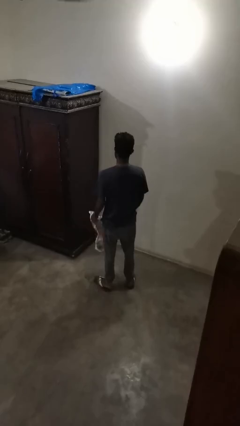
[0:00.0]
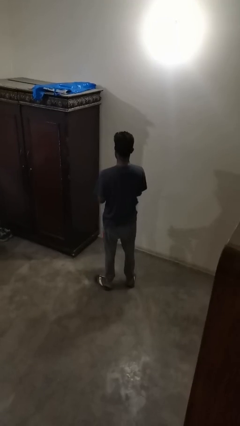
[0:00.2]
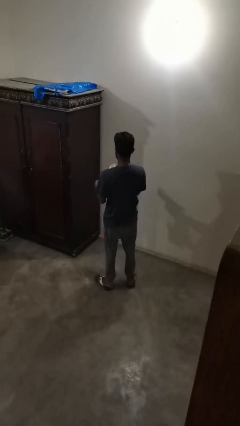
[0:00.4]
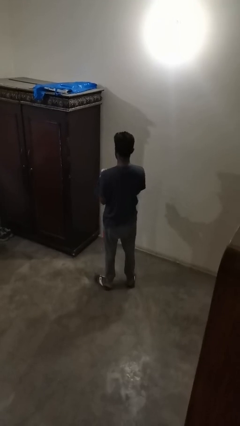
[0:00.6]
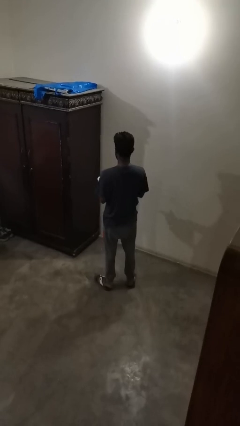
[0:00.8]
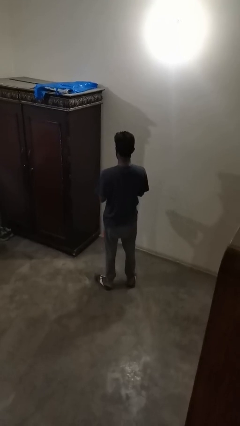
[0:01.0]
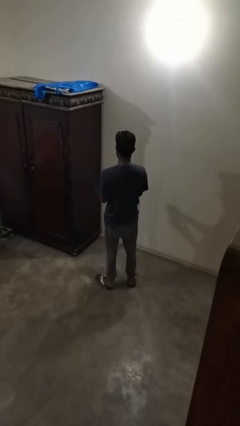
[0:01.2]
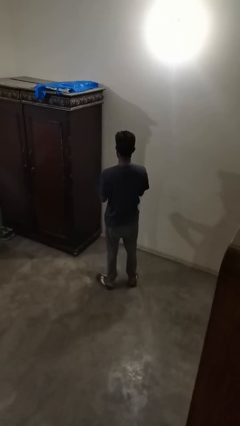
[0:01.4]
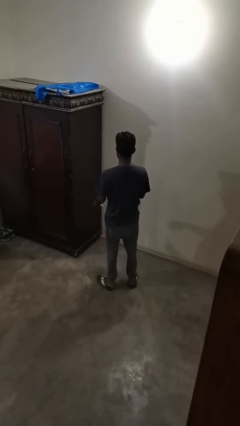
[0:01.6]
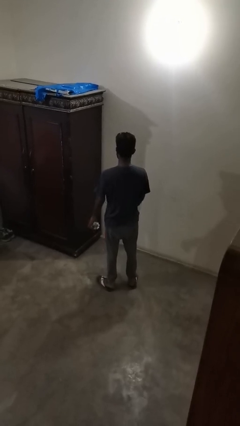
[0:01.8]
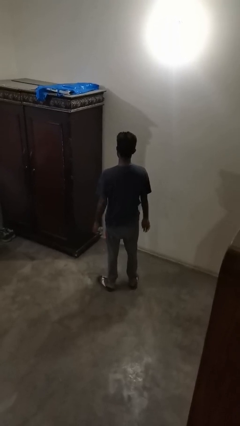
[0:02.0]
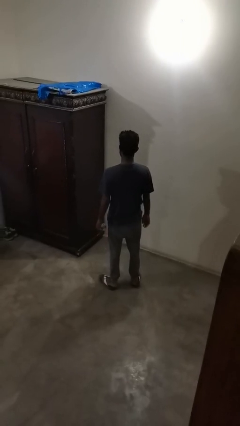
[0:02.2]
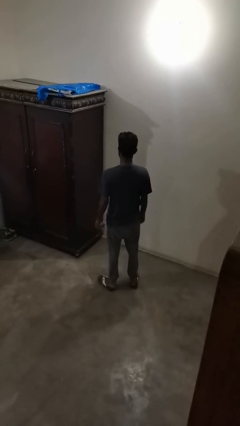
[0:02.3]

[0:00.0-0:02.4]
person crumples paper

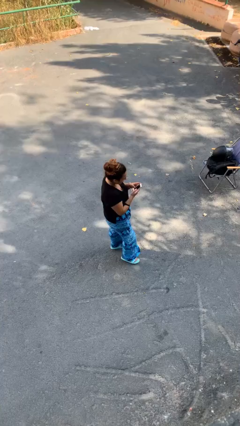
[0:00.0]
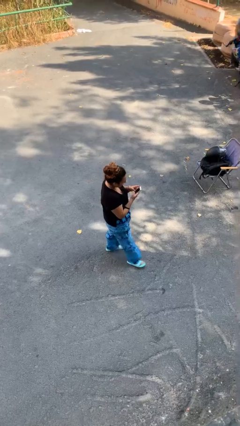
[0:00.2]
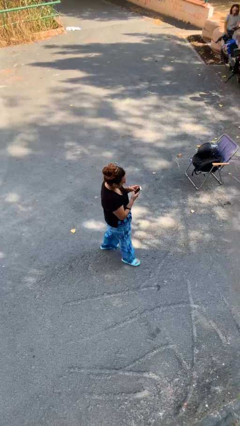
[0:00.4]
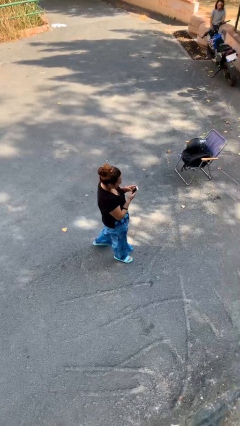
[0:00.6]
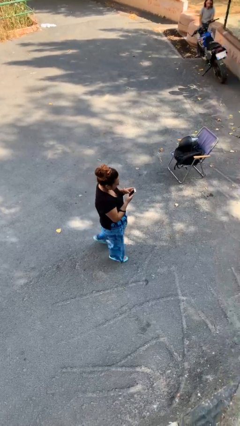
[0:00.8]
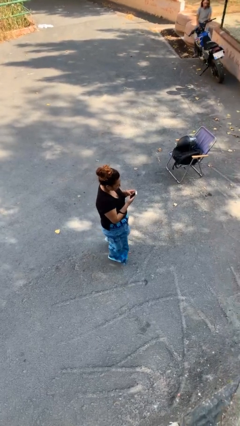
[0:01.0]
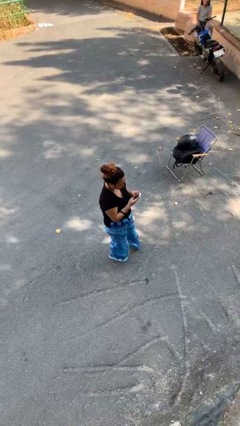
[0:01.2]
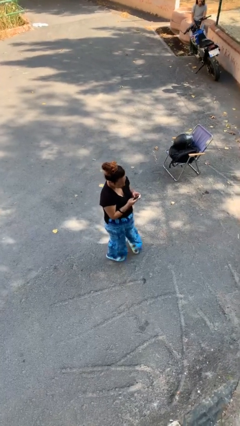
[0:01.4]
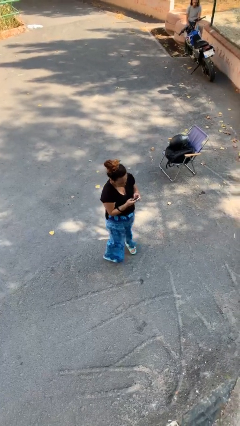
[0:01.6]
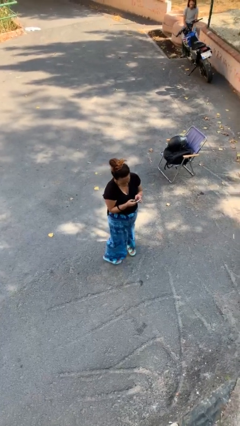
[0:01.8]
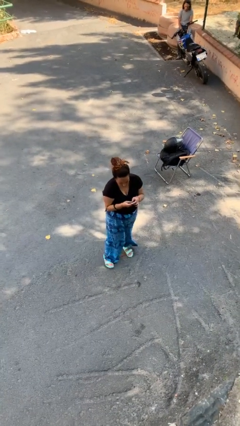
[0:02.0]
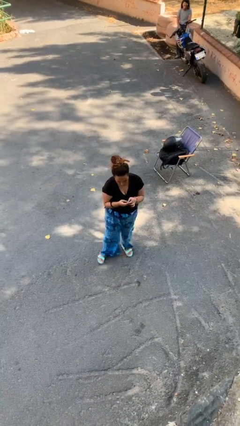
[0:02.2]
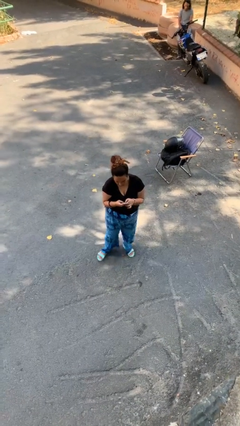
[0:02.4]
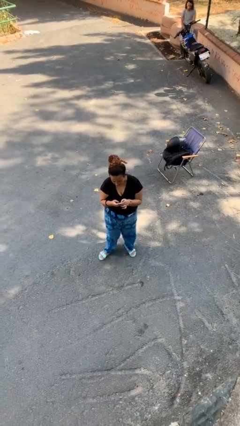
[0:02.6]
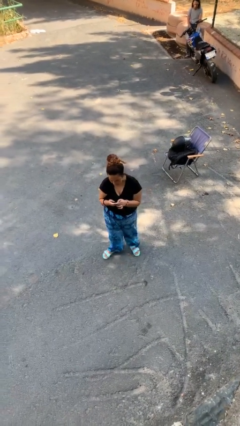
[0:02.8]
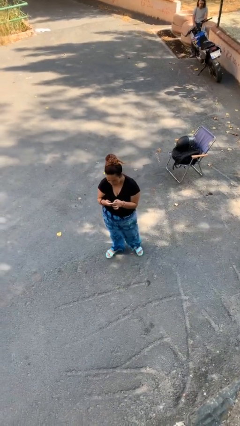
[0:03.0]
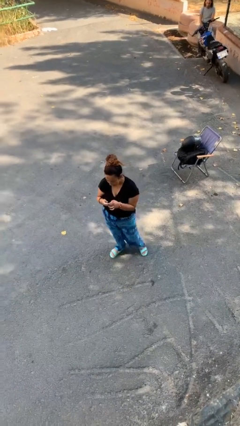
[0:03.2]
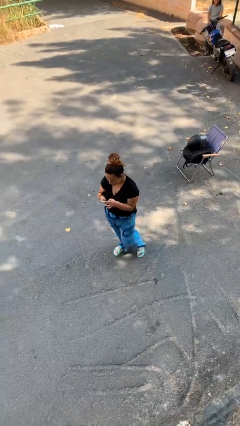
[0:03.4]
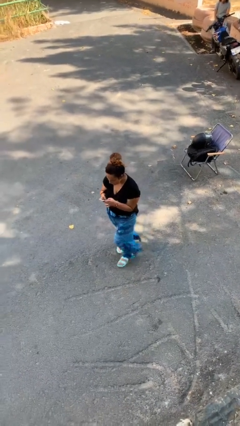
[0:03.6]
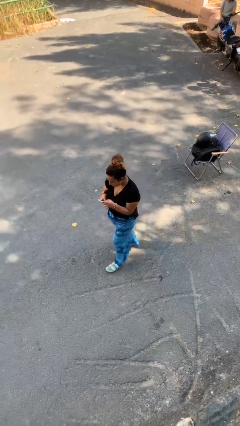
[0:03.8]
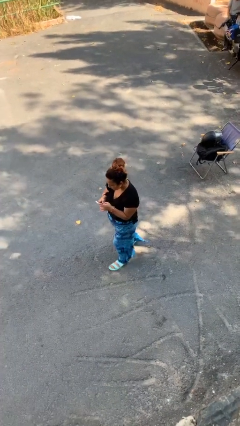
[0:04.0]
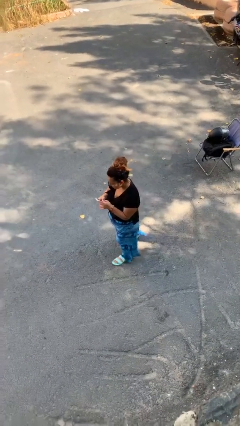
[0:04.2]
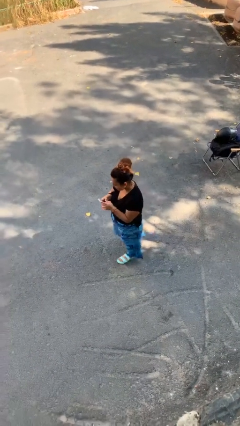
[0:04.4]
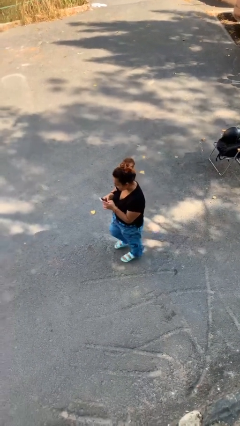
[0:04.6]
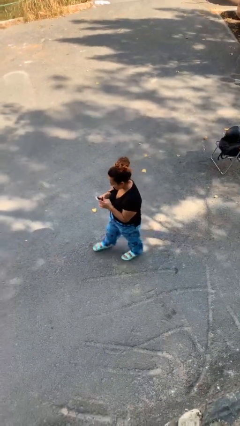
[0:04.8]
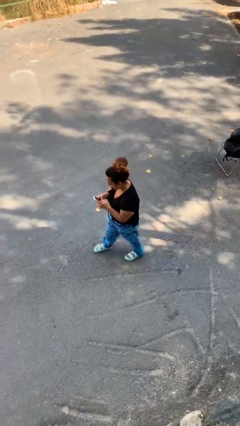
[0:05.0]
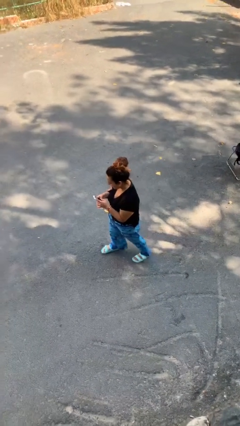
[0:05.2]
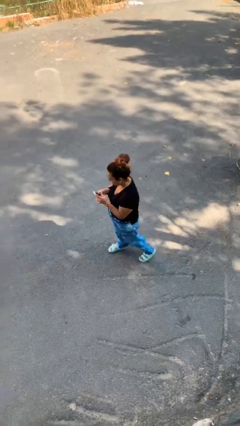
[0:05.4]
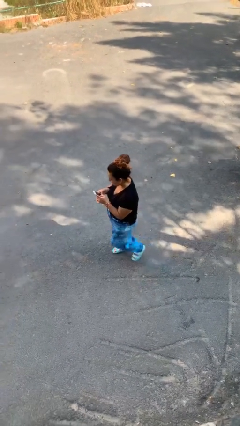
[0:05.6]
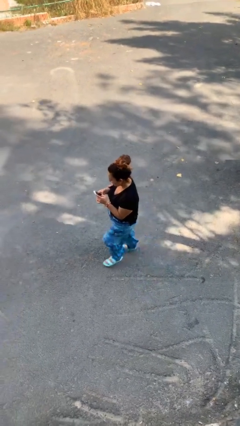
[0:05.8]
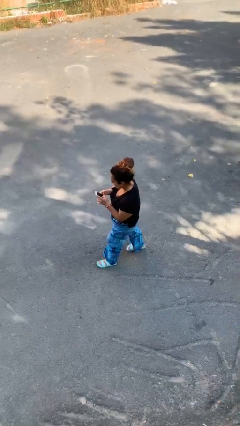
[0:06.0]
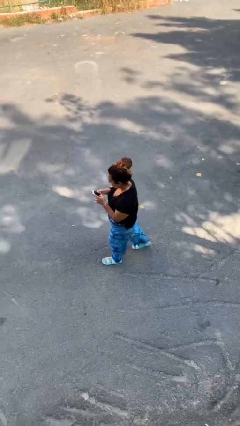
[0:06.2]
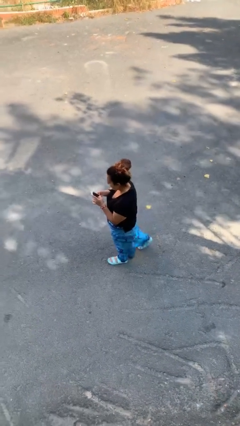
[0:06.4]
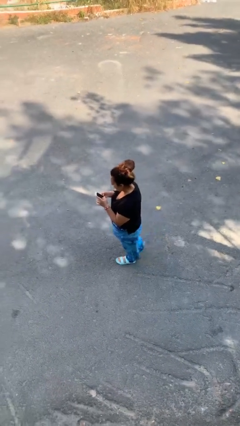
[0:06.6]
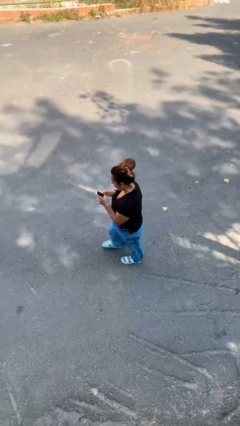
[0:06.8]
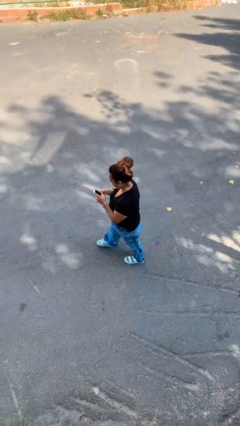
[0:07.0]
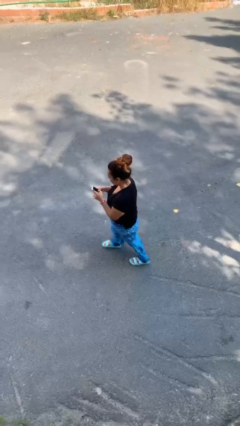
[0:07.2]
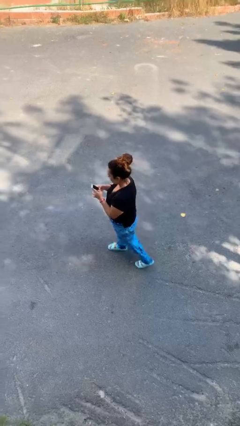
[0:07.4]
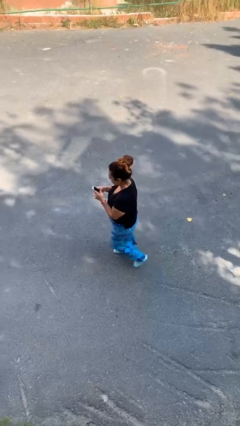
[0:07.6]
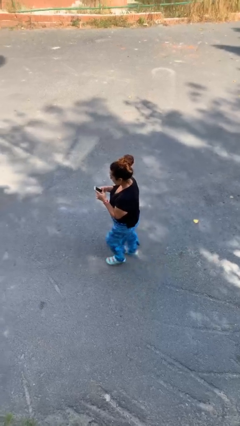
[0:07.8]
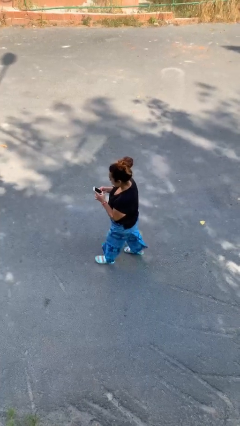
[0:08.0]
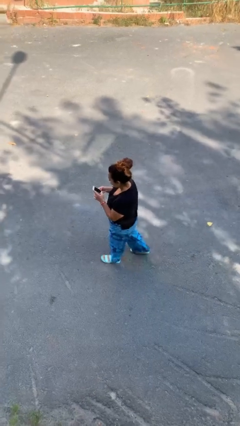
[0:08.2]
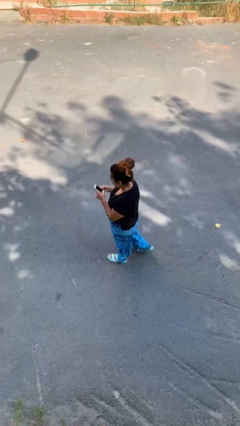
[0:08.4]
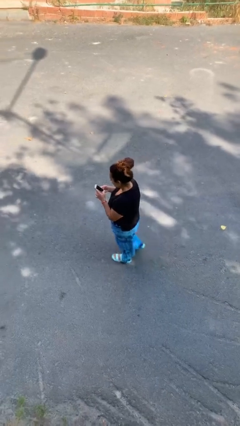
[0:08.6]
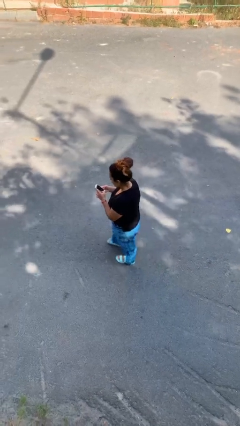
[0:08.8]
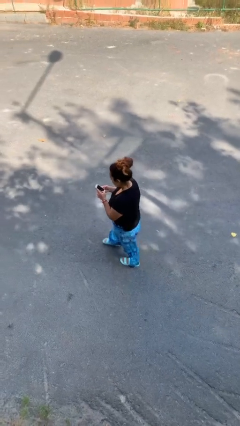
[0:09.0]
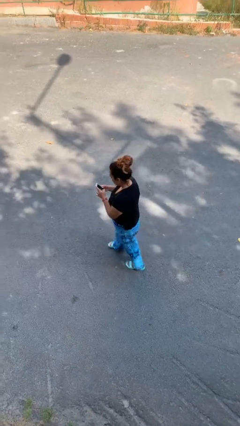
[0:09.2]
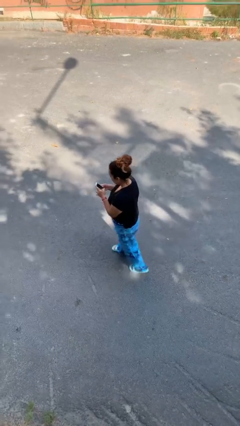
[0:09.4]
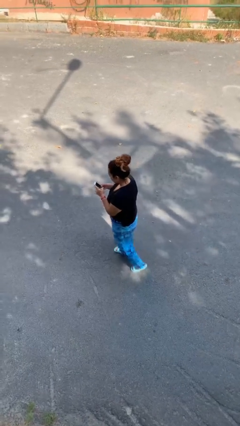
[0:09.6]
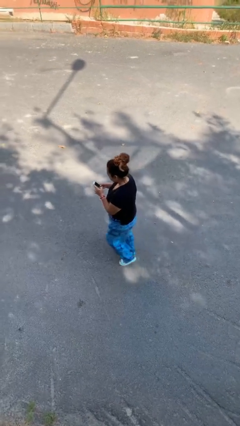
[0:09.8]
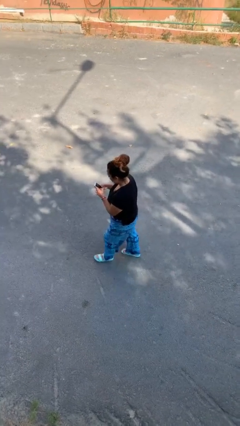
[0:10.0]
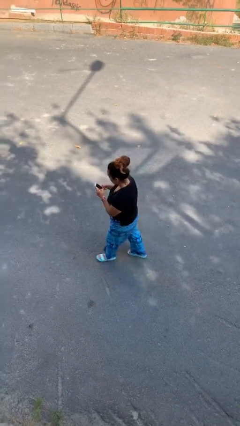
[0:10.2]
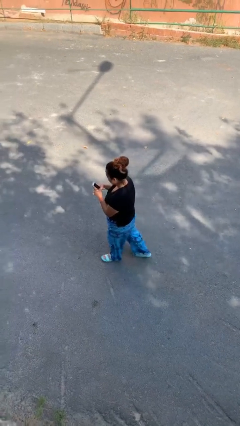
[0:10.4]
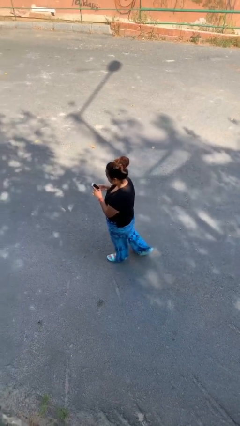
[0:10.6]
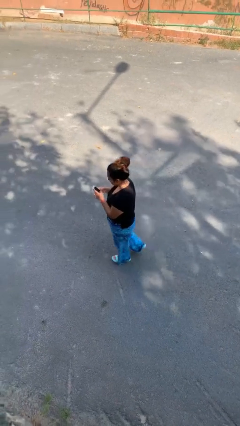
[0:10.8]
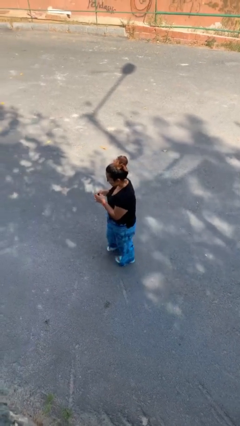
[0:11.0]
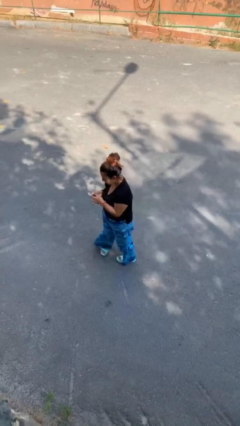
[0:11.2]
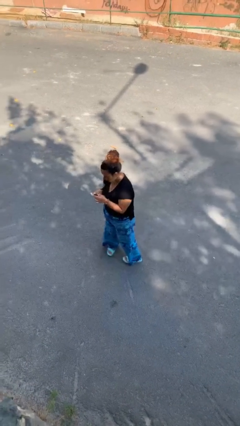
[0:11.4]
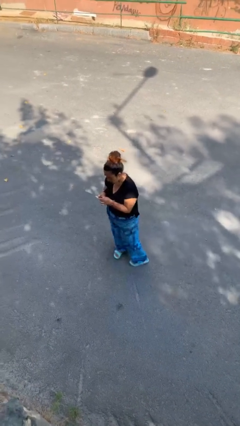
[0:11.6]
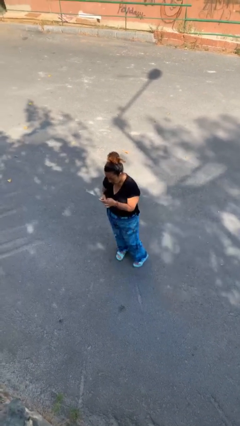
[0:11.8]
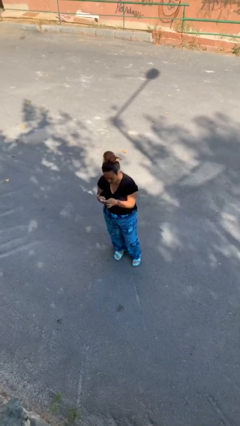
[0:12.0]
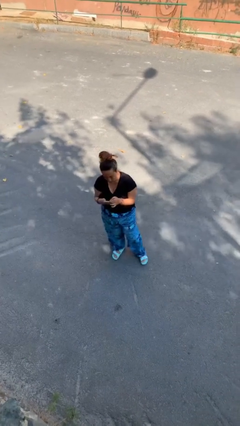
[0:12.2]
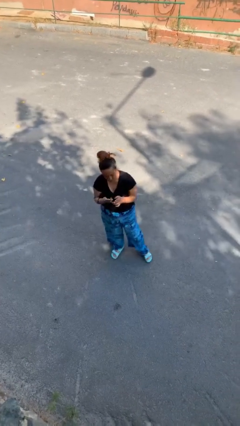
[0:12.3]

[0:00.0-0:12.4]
person texts on phone

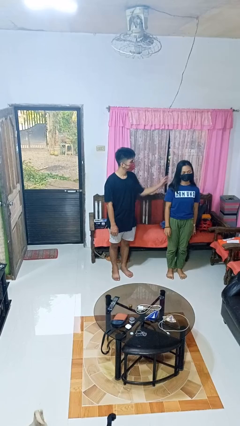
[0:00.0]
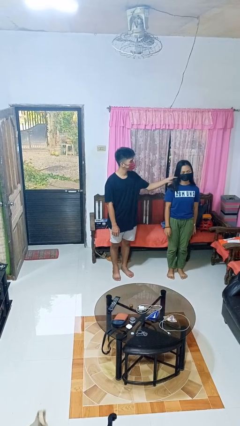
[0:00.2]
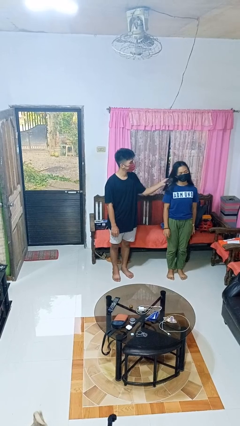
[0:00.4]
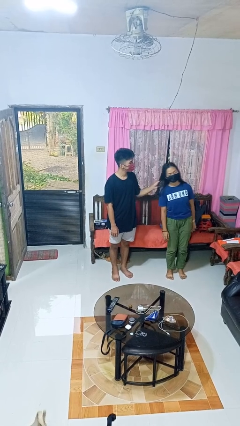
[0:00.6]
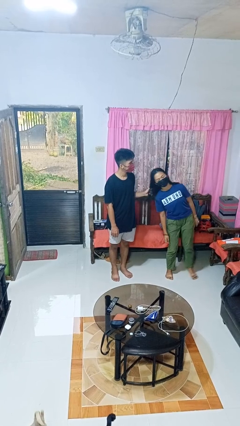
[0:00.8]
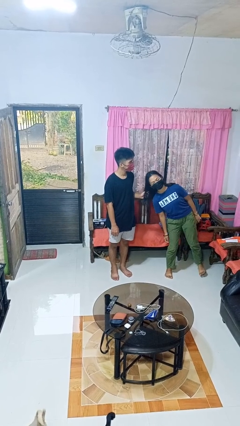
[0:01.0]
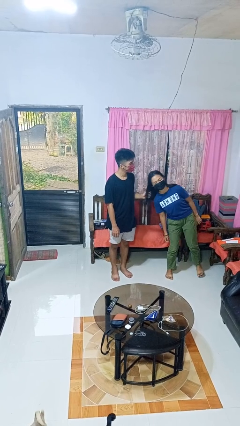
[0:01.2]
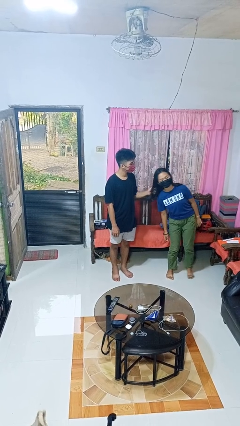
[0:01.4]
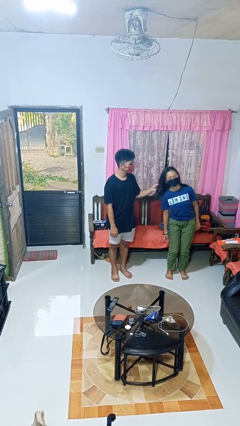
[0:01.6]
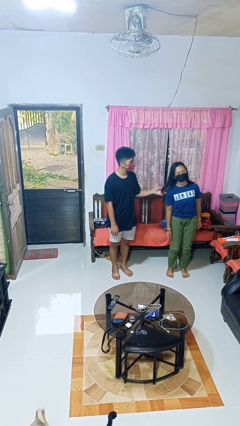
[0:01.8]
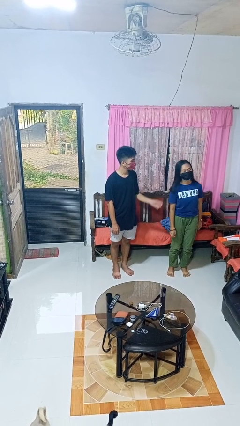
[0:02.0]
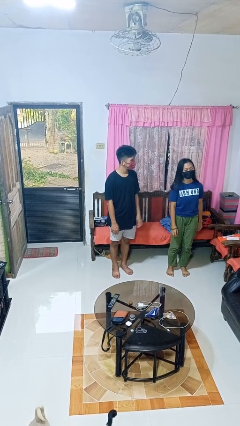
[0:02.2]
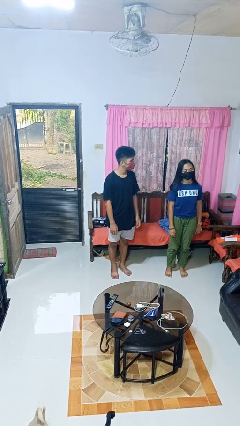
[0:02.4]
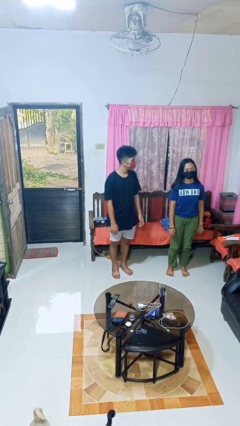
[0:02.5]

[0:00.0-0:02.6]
person grabs person by hair

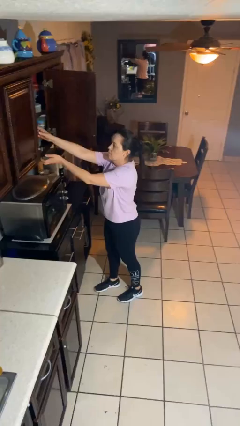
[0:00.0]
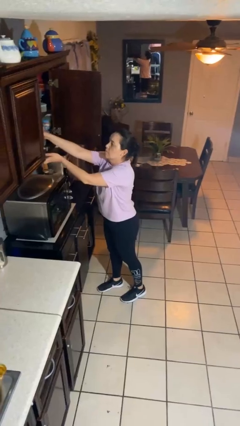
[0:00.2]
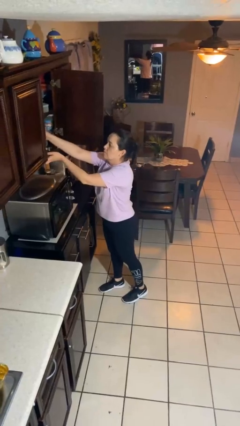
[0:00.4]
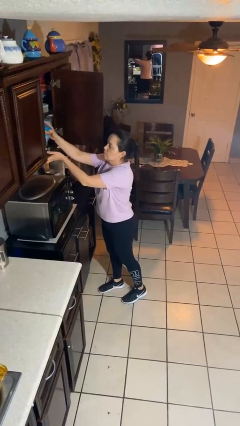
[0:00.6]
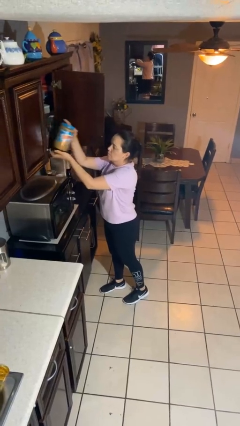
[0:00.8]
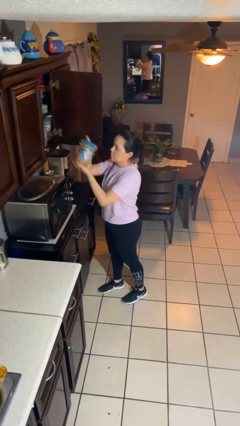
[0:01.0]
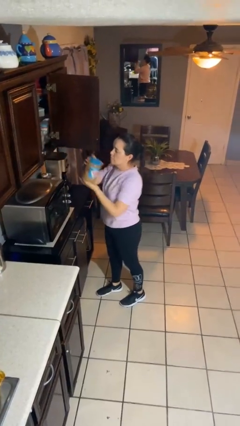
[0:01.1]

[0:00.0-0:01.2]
person picks up object from cabinet
